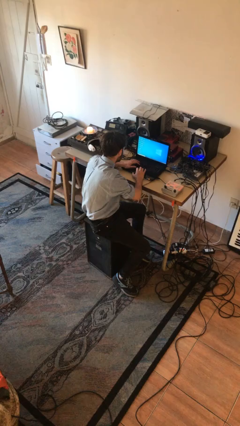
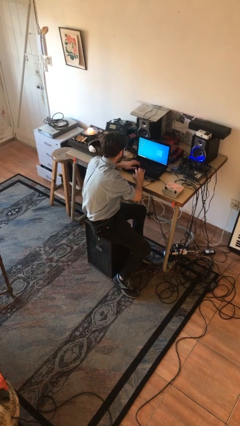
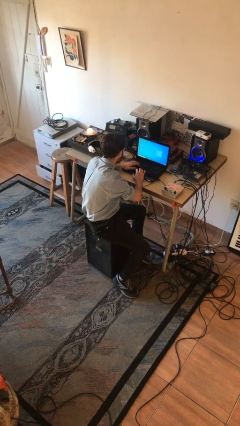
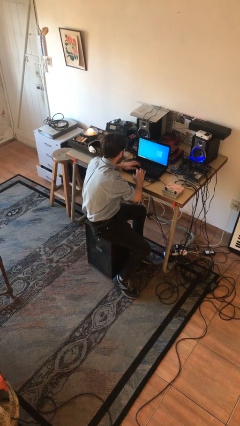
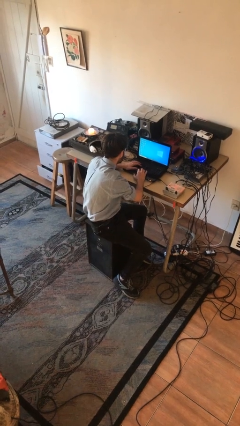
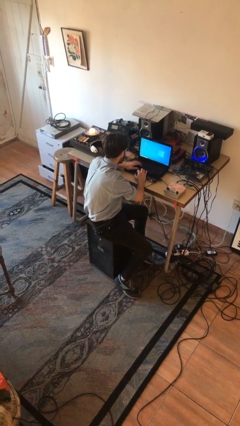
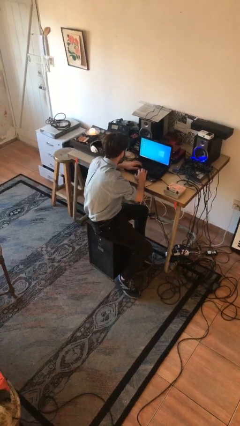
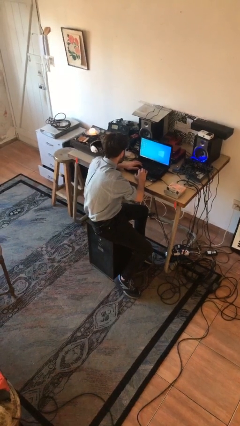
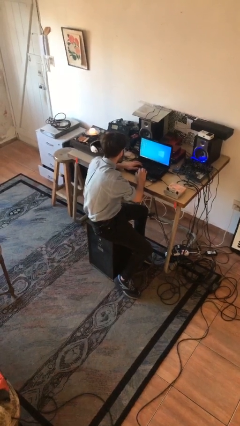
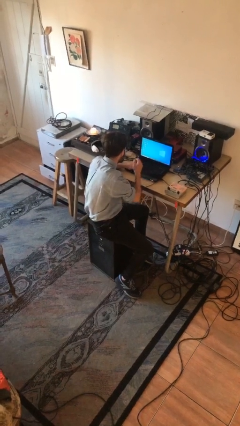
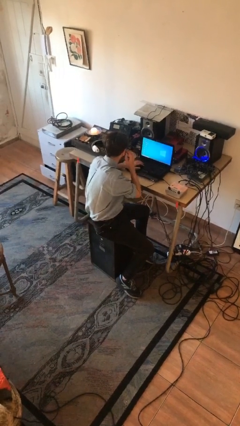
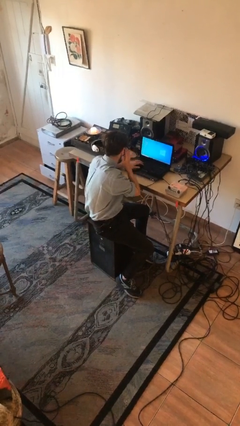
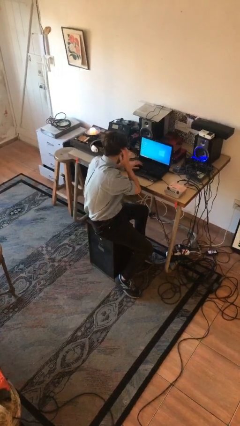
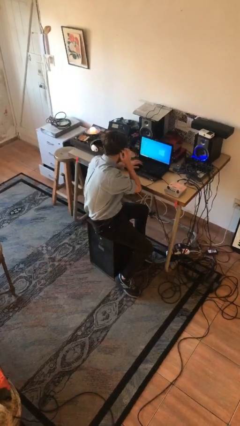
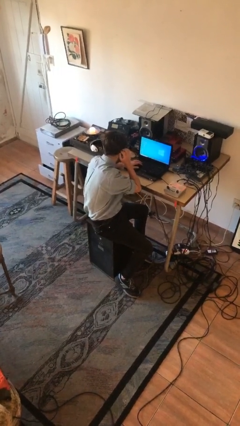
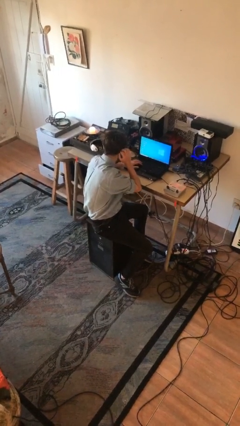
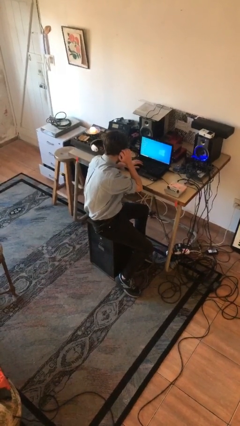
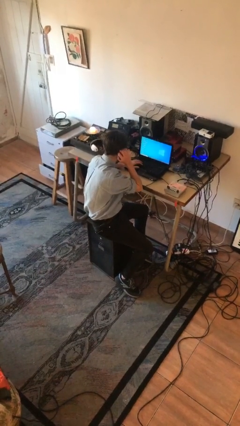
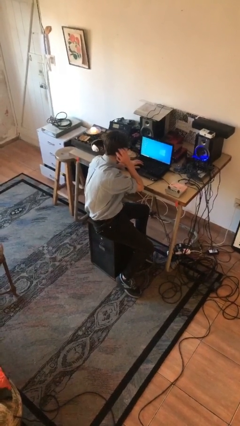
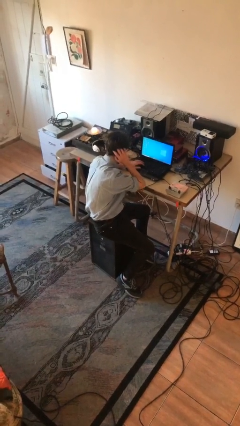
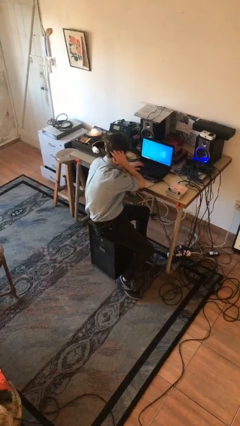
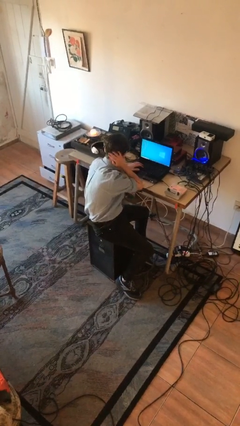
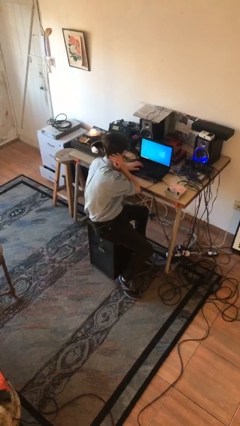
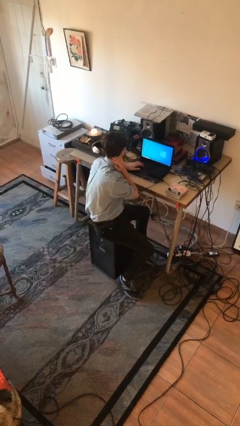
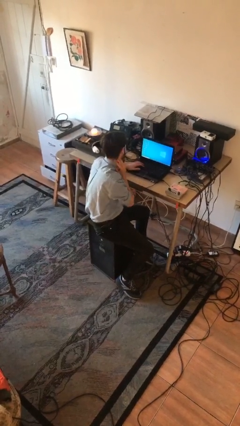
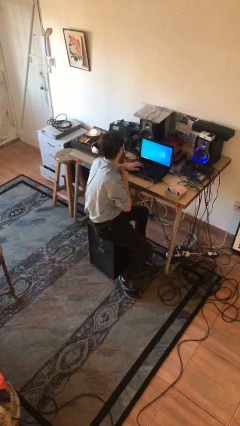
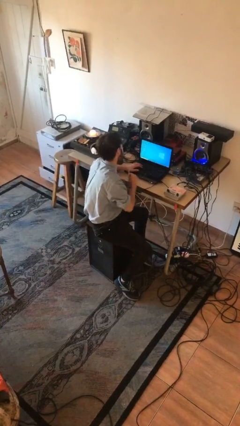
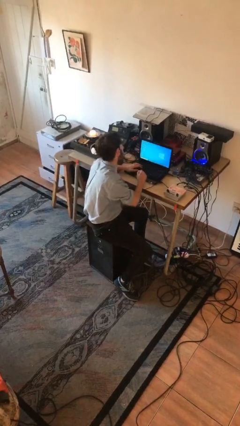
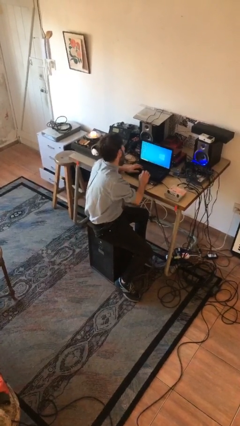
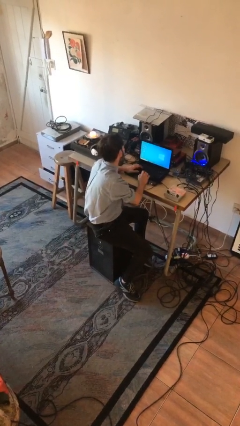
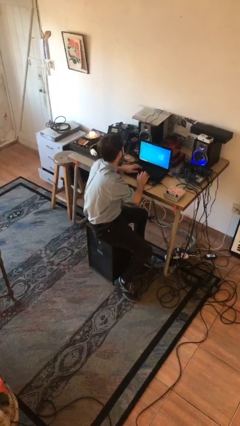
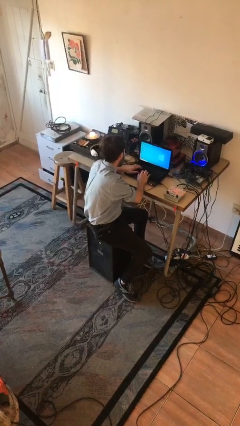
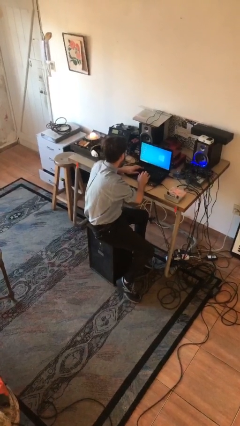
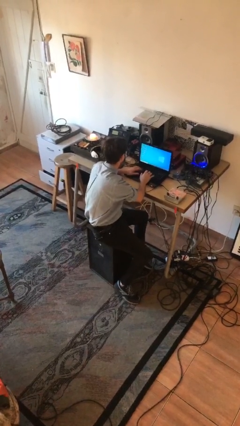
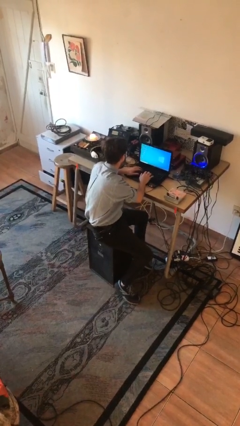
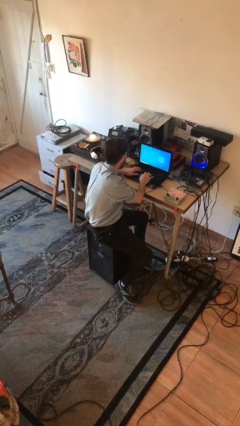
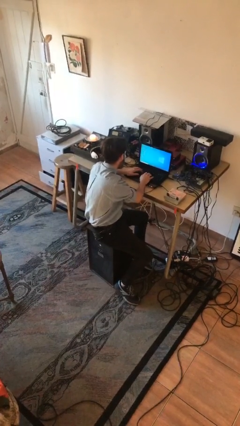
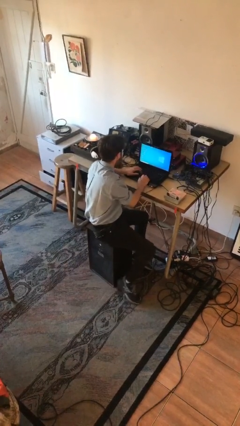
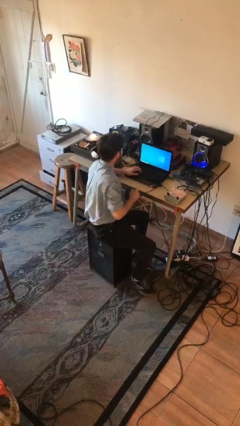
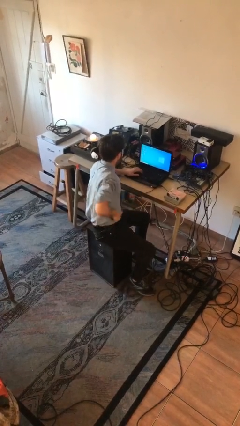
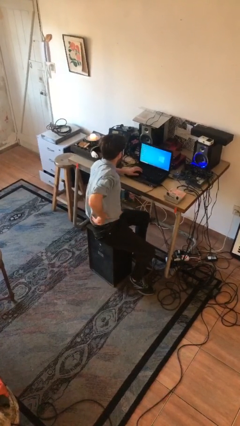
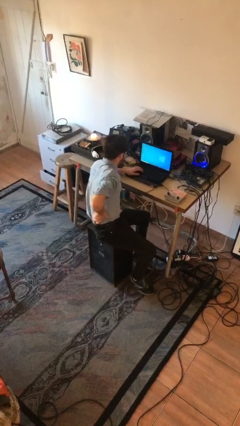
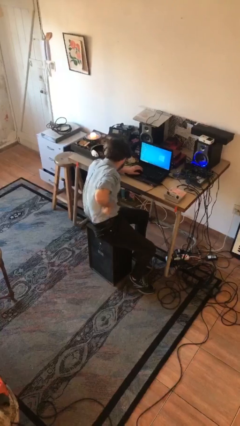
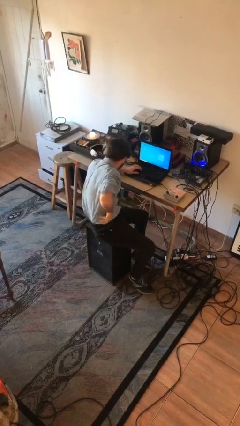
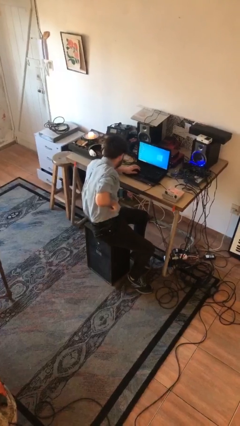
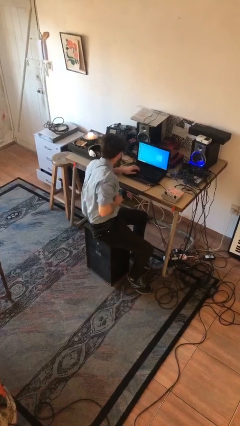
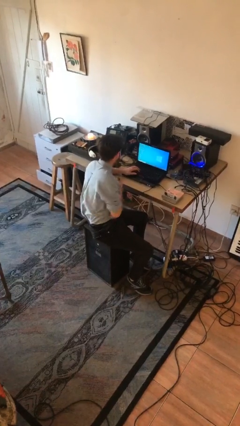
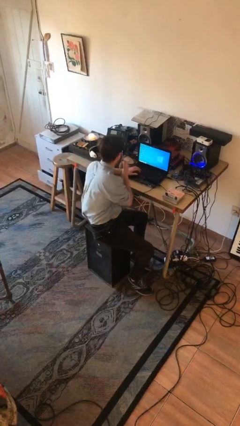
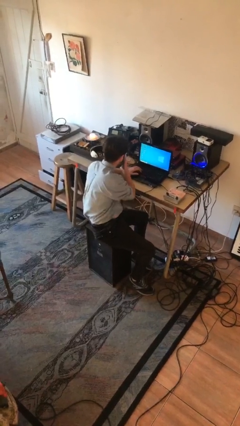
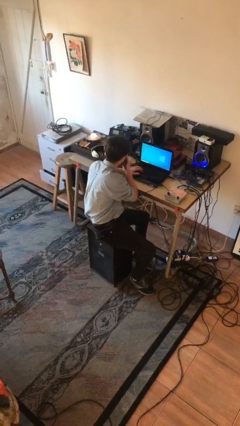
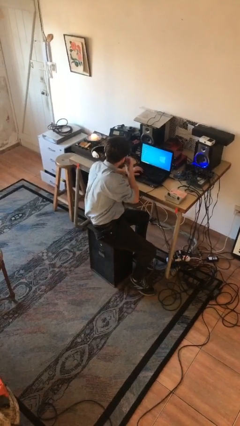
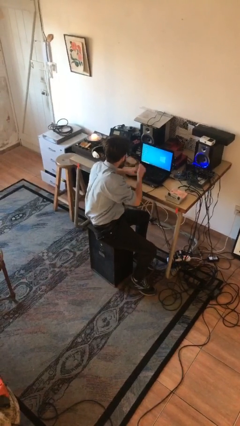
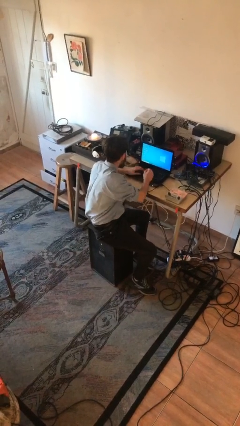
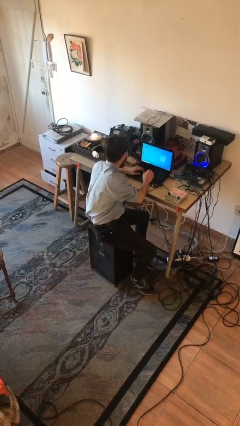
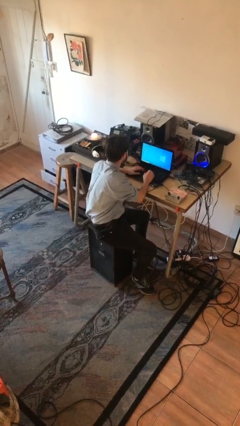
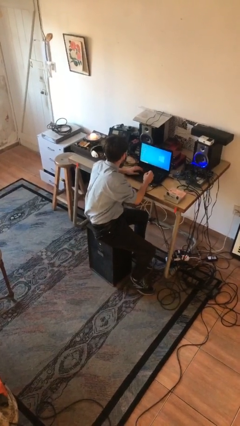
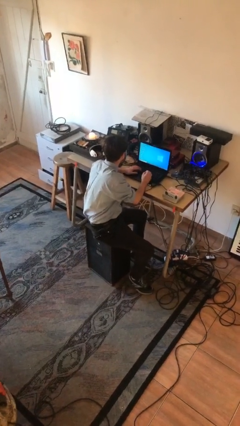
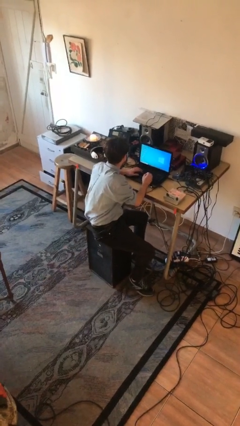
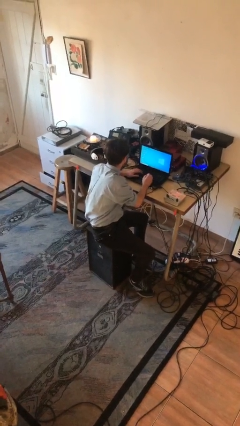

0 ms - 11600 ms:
person interacts with laptop

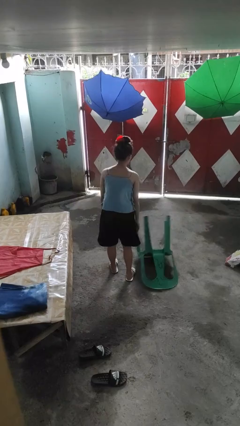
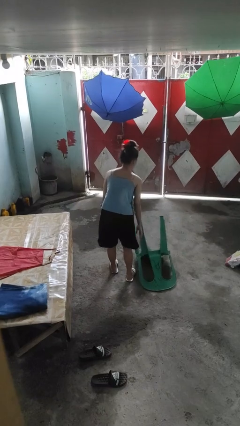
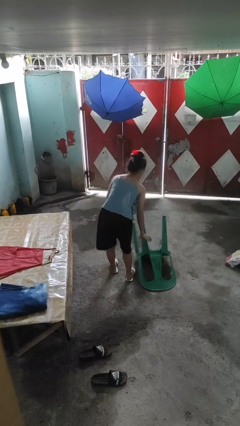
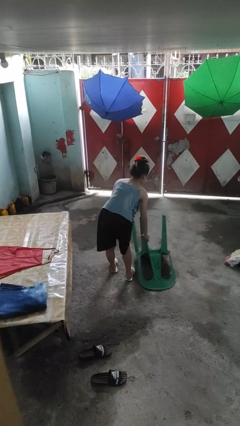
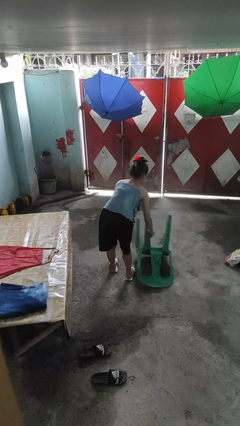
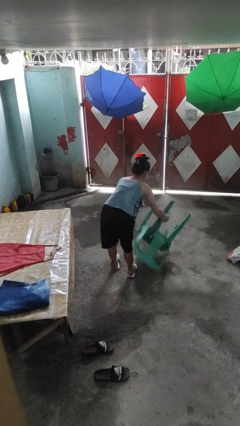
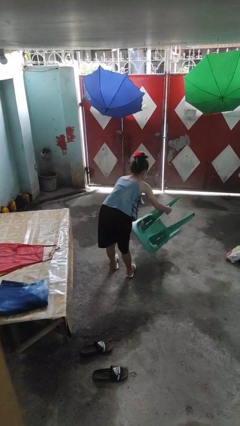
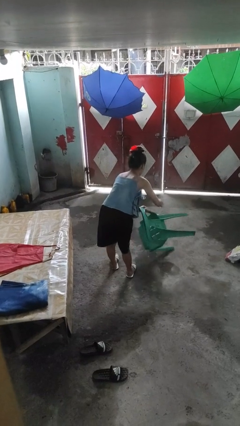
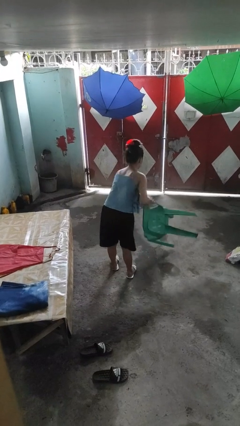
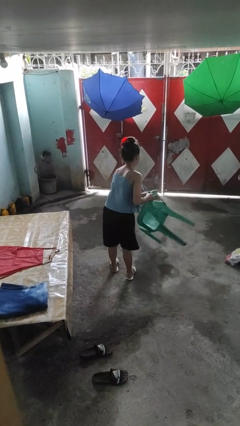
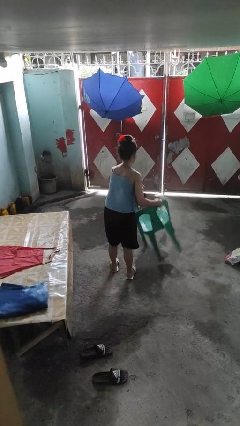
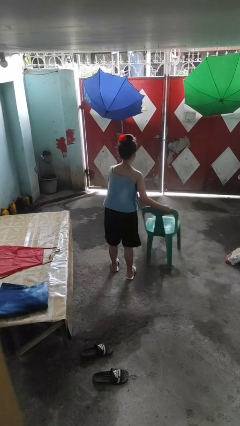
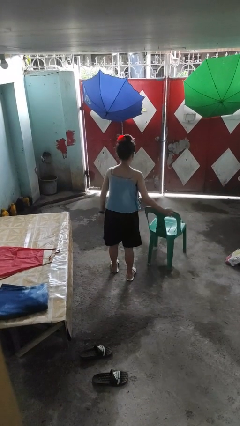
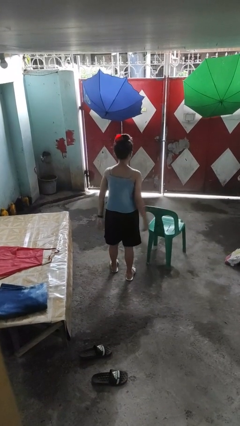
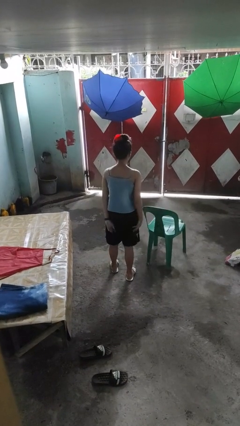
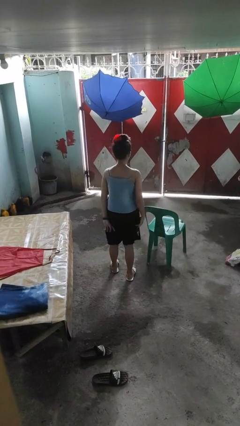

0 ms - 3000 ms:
person sets upright furniture

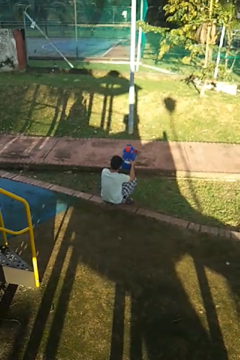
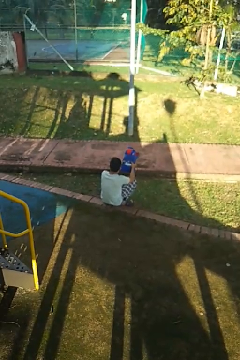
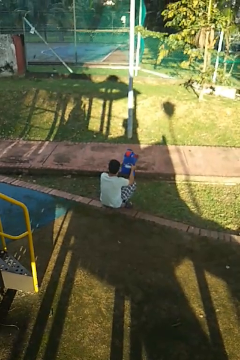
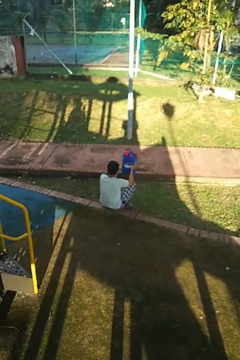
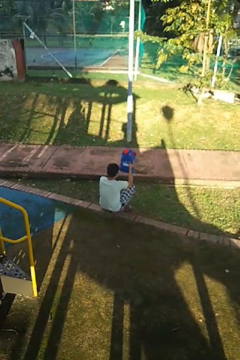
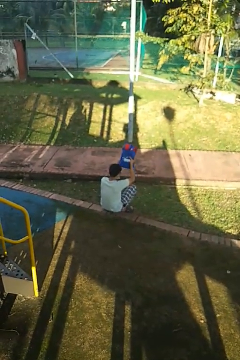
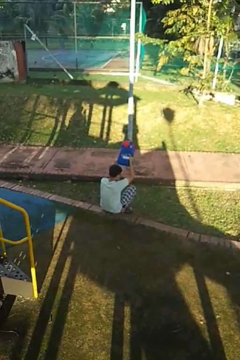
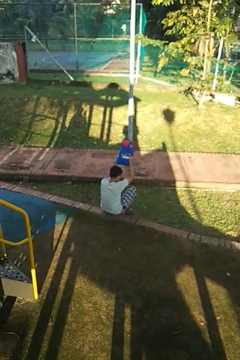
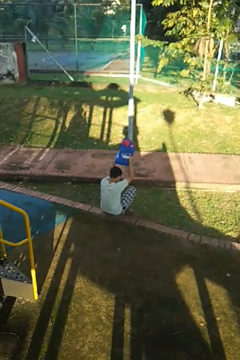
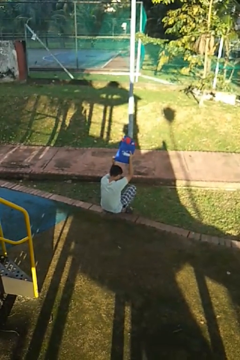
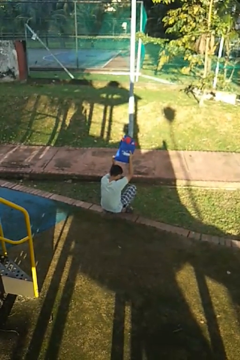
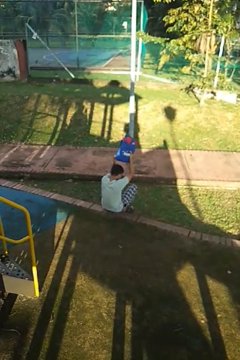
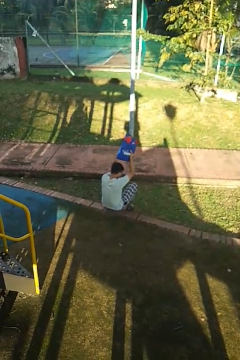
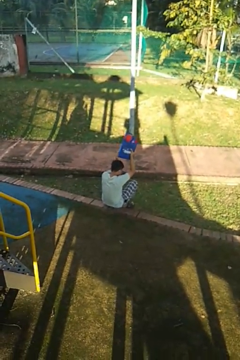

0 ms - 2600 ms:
person holds object above head

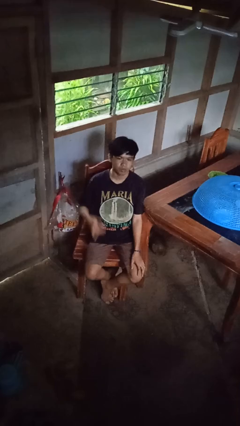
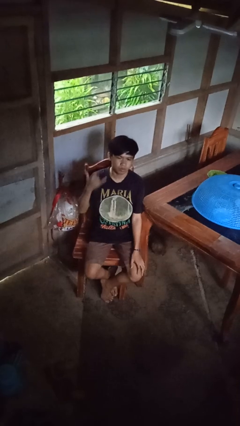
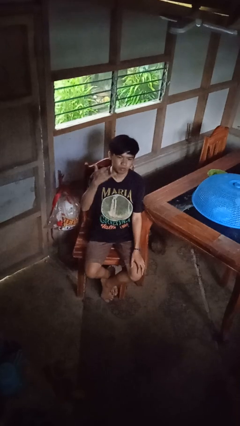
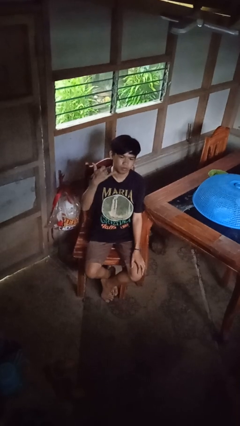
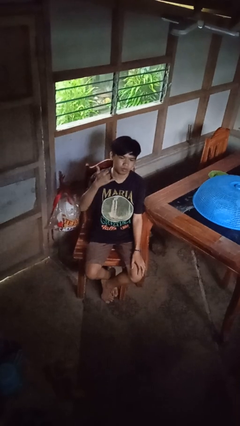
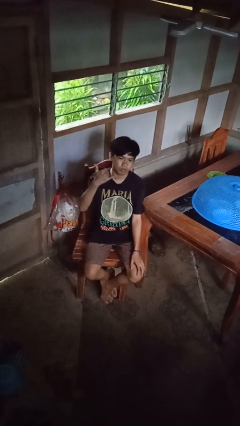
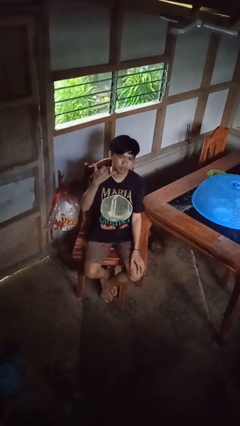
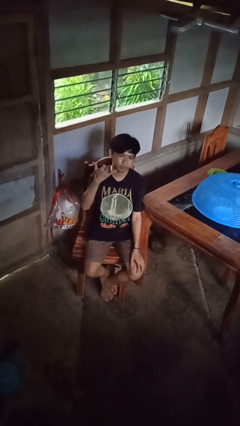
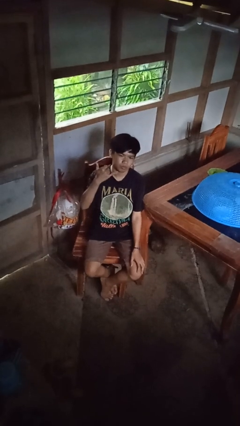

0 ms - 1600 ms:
person gestures hang loose
